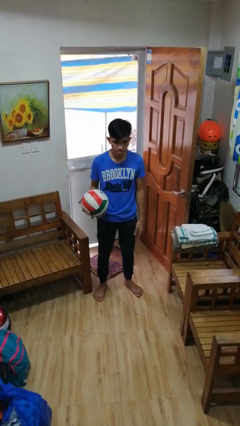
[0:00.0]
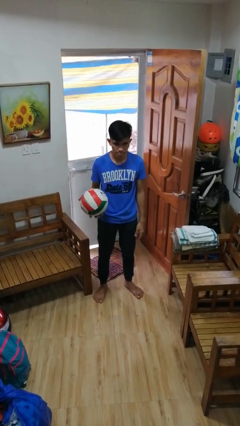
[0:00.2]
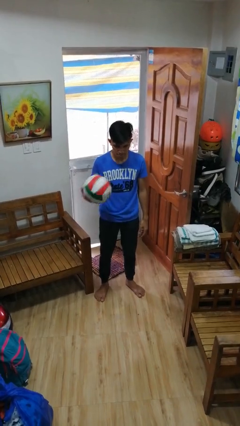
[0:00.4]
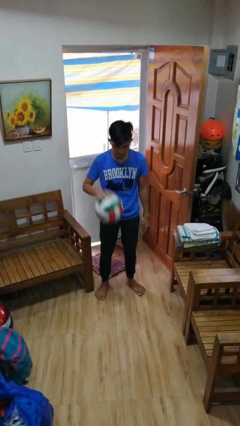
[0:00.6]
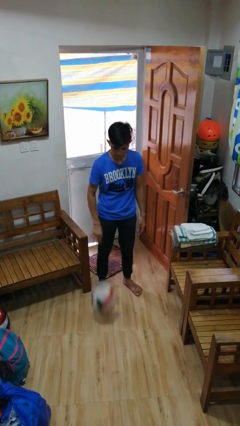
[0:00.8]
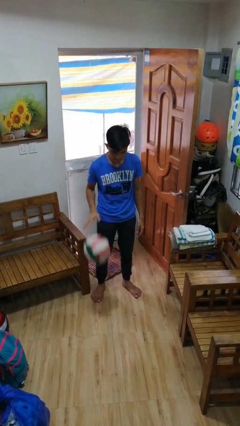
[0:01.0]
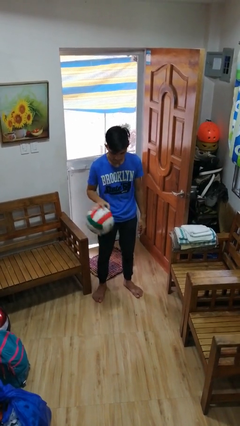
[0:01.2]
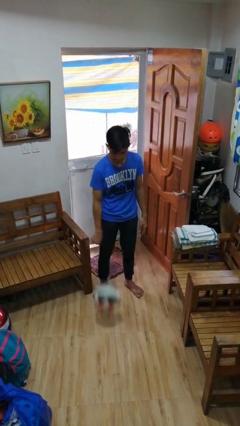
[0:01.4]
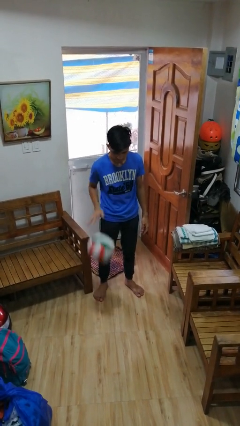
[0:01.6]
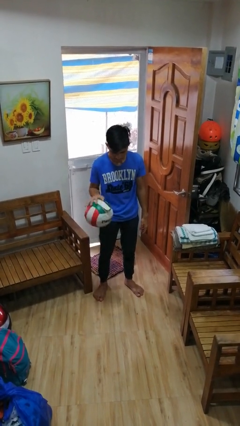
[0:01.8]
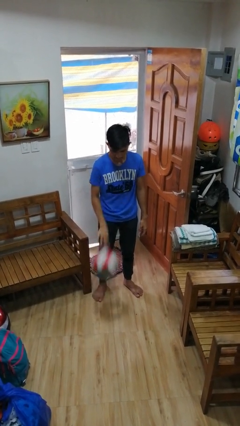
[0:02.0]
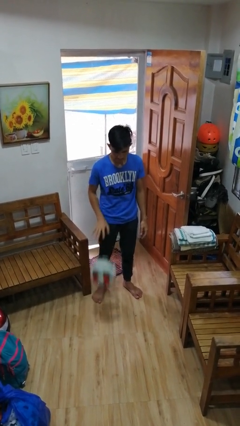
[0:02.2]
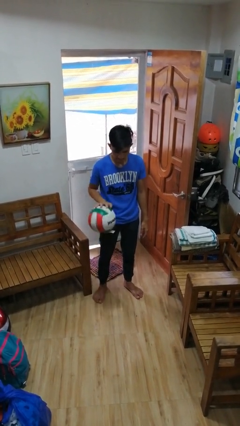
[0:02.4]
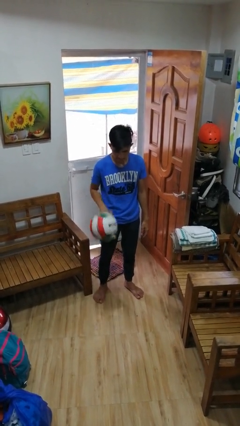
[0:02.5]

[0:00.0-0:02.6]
person bounces ball on floor

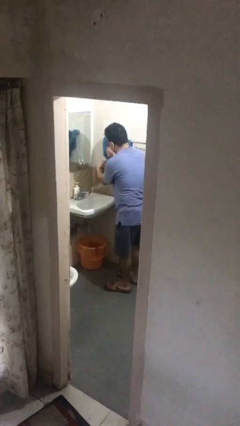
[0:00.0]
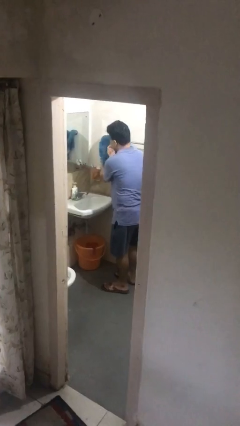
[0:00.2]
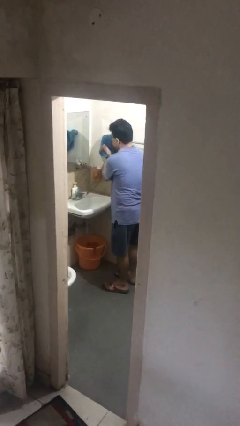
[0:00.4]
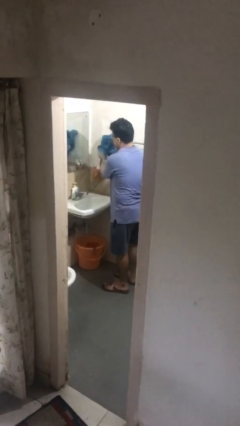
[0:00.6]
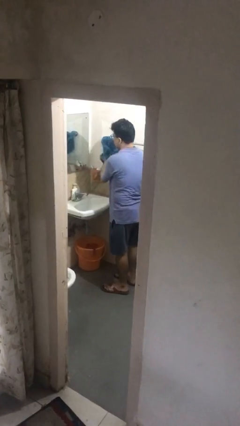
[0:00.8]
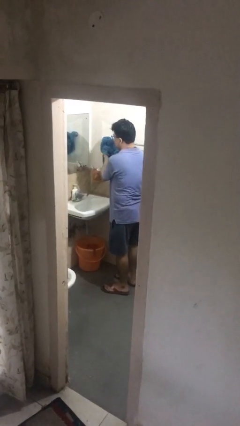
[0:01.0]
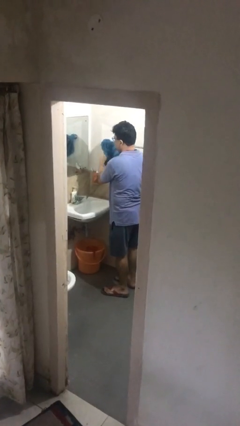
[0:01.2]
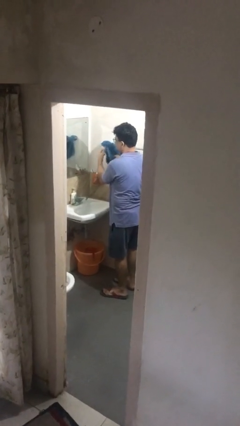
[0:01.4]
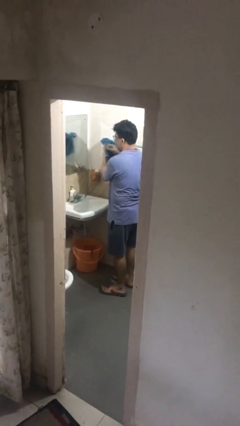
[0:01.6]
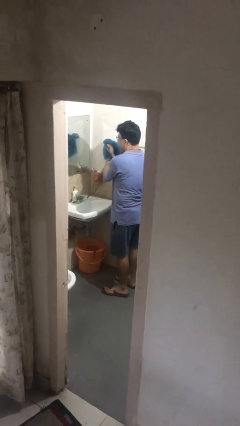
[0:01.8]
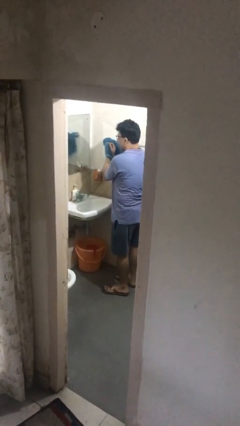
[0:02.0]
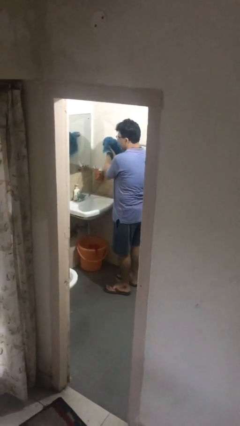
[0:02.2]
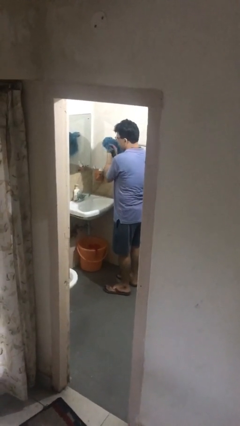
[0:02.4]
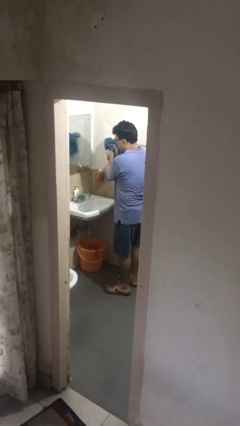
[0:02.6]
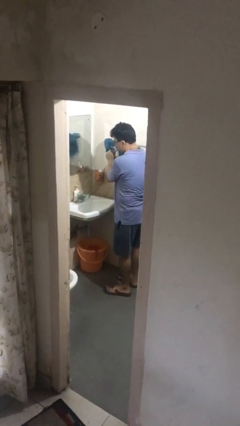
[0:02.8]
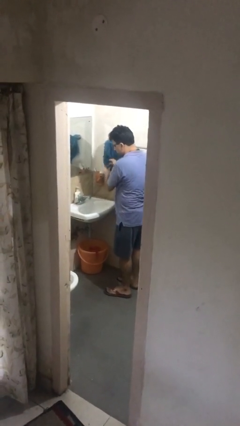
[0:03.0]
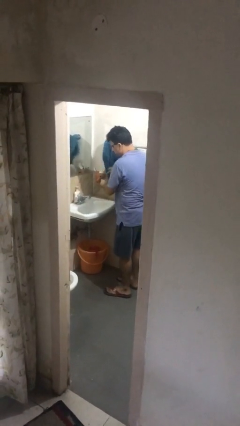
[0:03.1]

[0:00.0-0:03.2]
person dries hands with towel

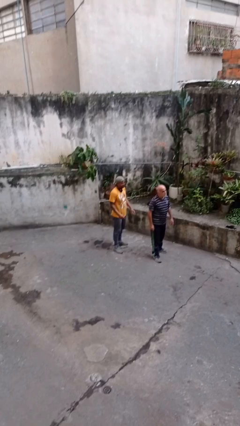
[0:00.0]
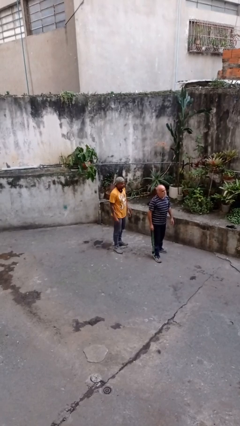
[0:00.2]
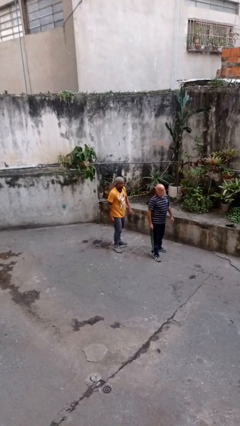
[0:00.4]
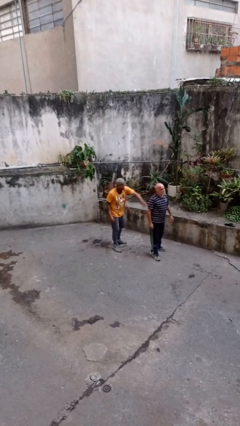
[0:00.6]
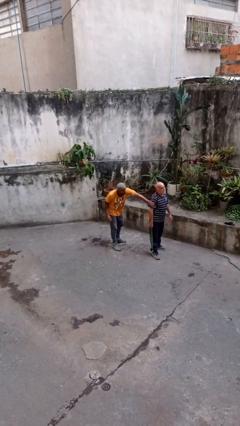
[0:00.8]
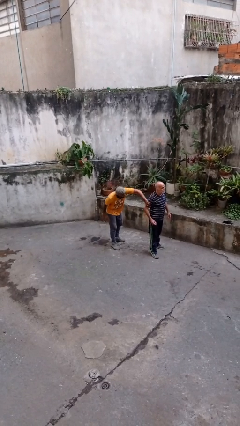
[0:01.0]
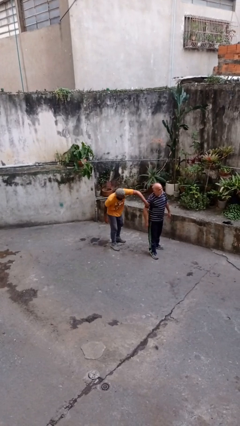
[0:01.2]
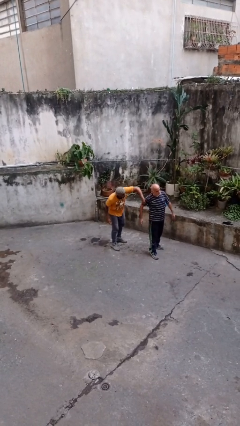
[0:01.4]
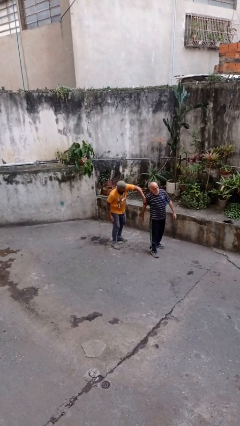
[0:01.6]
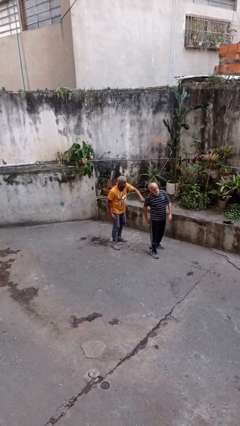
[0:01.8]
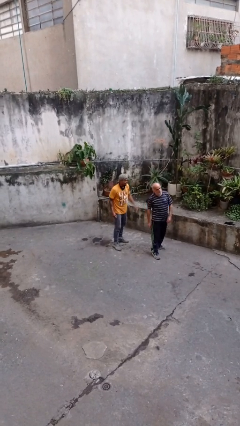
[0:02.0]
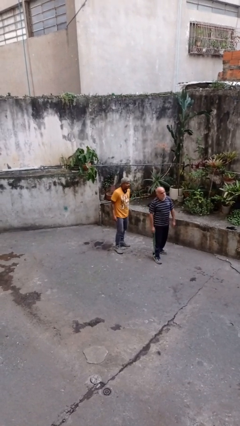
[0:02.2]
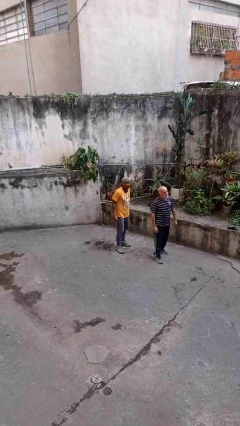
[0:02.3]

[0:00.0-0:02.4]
person grabs person by bicep

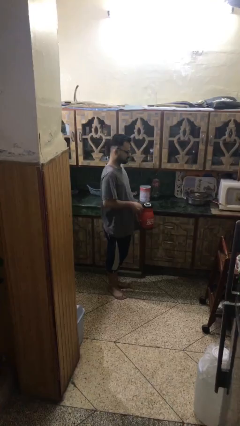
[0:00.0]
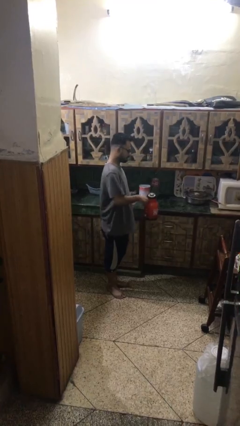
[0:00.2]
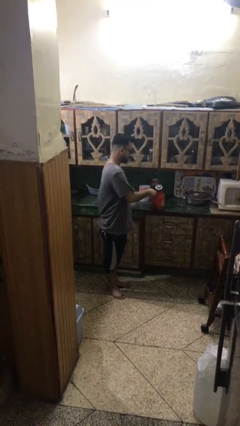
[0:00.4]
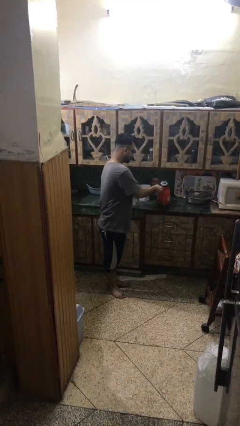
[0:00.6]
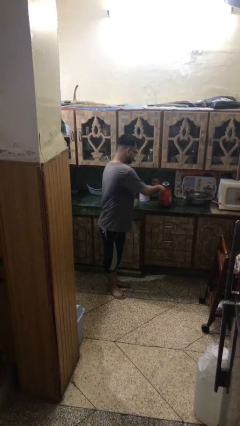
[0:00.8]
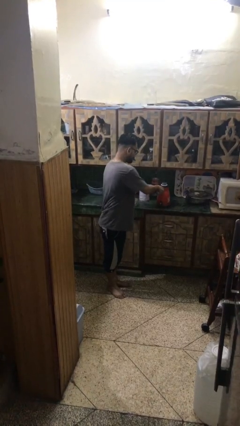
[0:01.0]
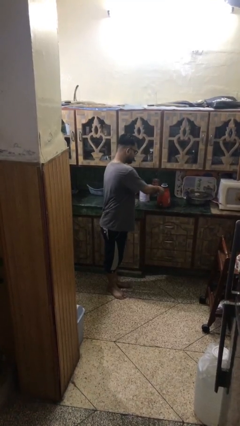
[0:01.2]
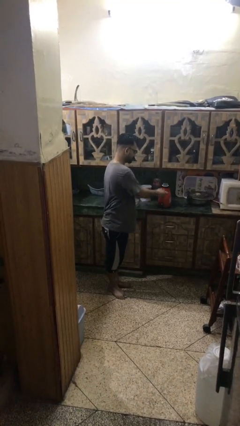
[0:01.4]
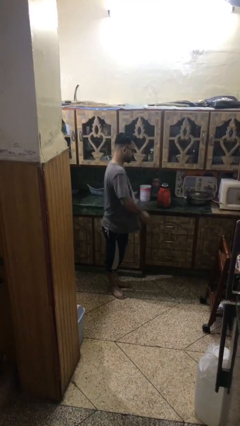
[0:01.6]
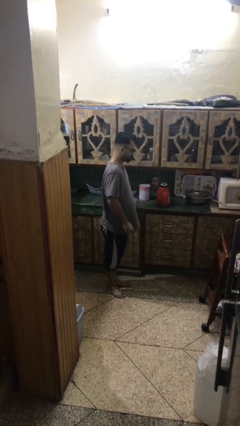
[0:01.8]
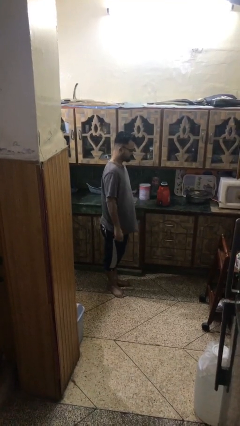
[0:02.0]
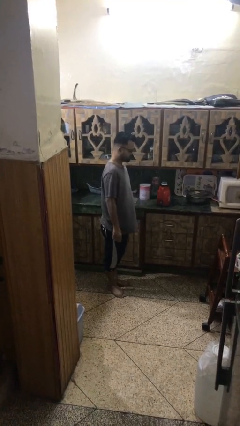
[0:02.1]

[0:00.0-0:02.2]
person puts down object on shelf

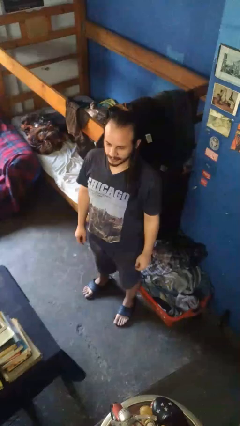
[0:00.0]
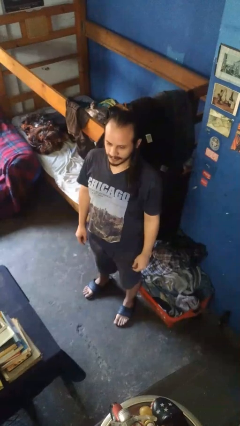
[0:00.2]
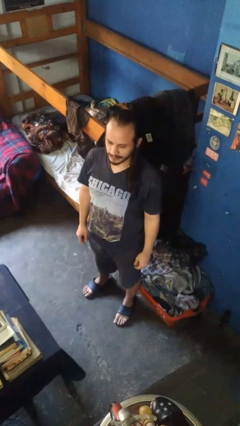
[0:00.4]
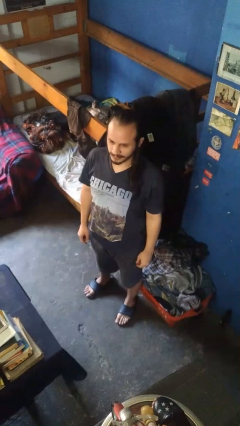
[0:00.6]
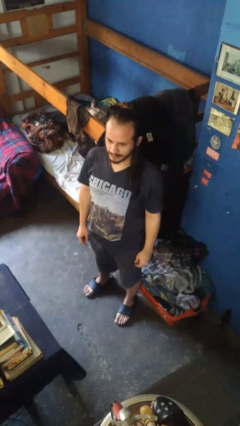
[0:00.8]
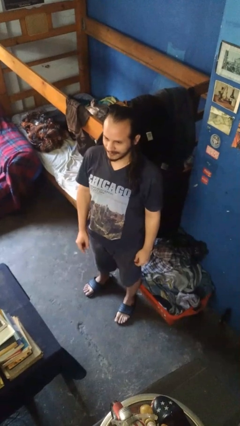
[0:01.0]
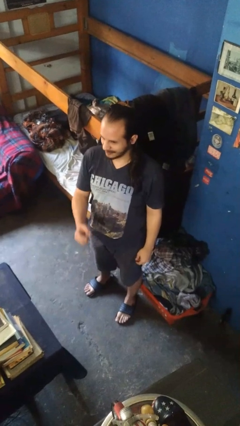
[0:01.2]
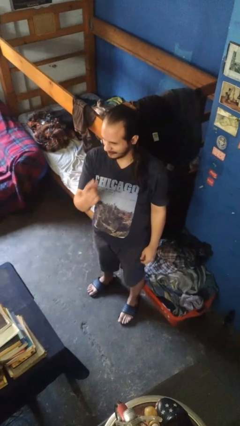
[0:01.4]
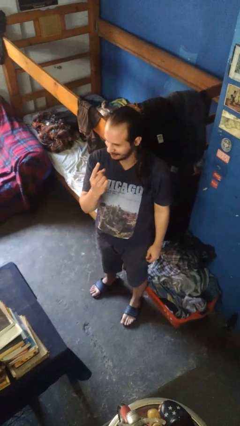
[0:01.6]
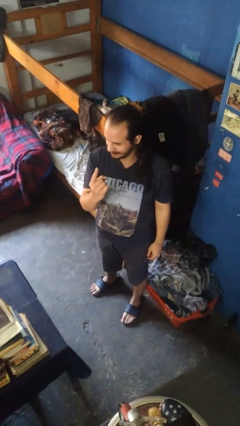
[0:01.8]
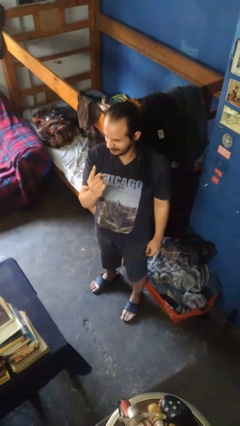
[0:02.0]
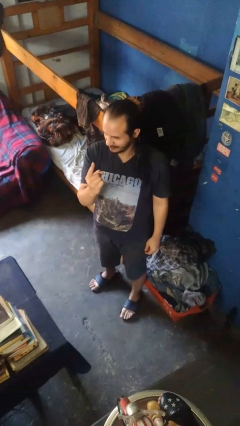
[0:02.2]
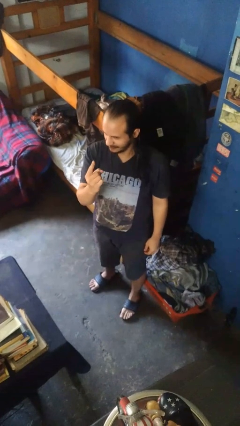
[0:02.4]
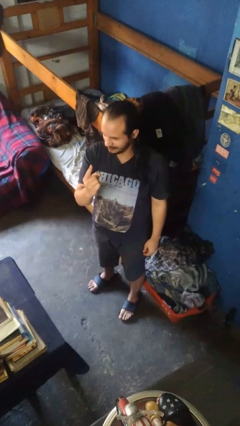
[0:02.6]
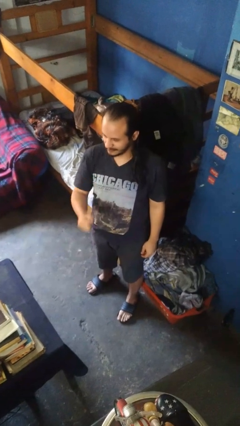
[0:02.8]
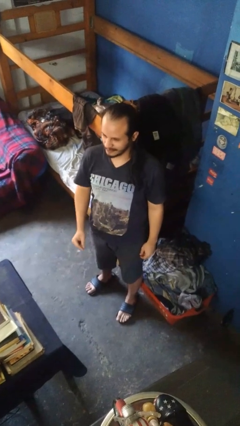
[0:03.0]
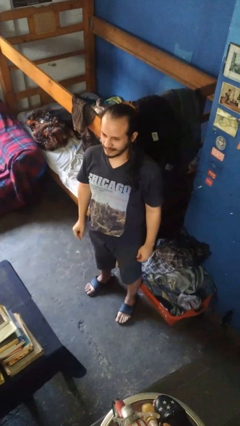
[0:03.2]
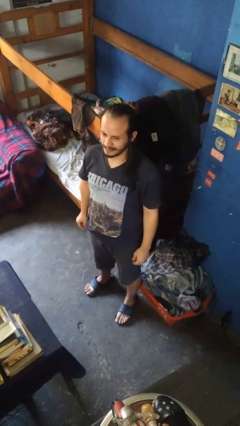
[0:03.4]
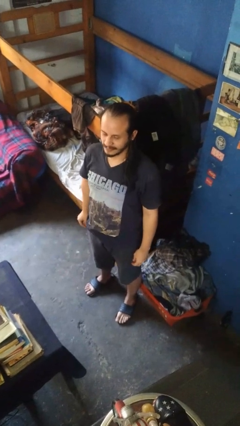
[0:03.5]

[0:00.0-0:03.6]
person gestures number one

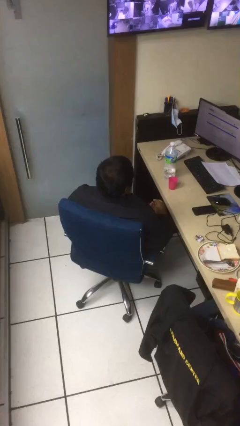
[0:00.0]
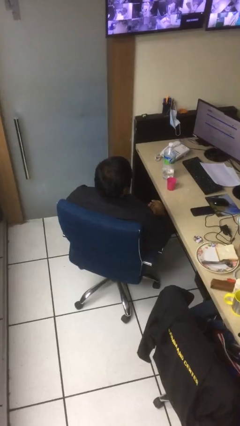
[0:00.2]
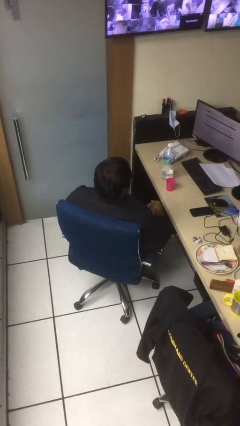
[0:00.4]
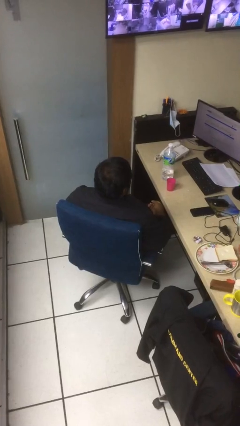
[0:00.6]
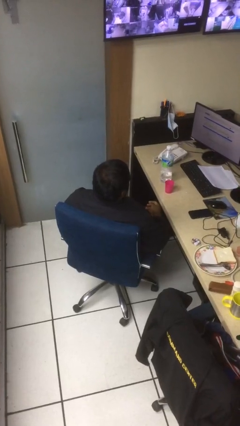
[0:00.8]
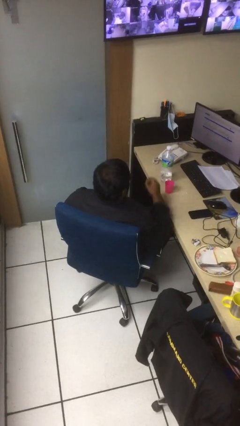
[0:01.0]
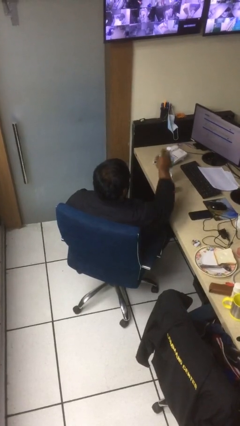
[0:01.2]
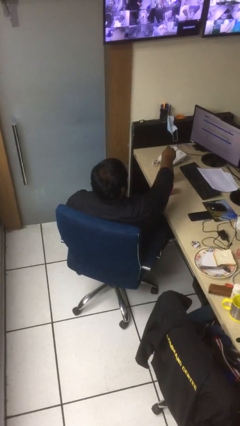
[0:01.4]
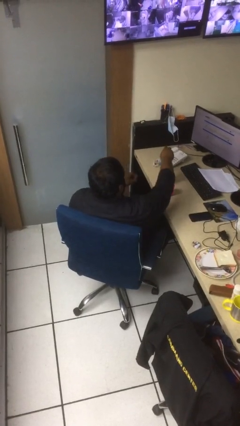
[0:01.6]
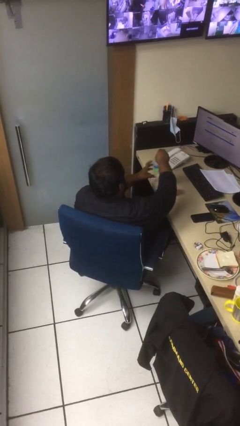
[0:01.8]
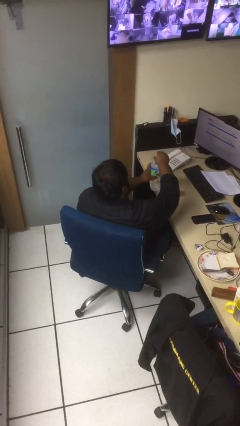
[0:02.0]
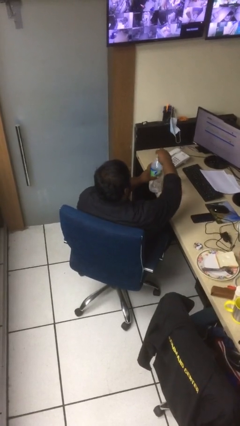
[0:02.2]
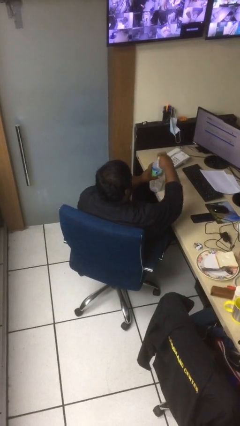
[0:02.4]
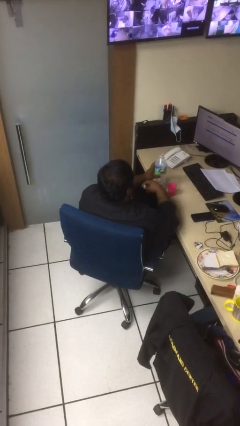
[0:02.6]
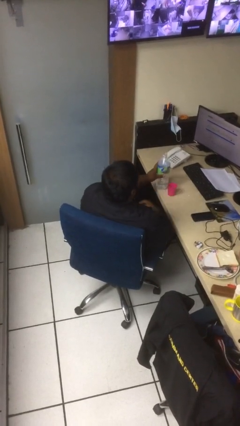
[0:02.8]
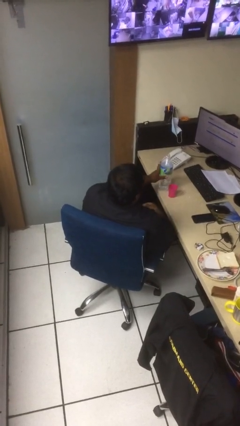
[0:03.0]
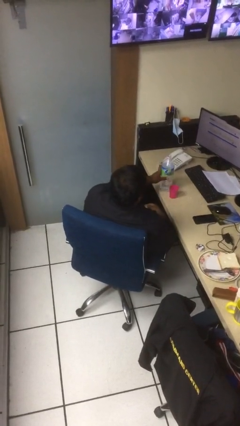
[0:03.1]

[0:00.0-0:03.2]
person unscrews lid from bottle
